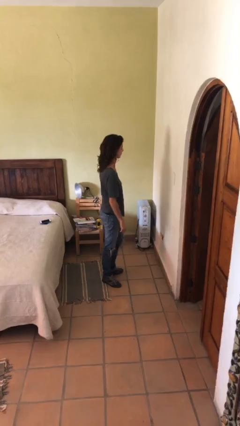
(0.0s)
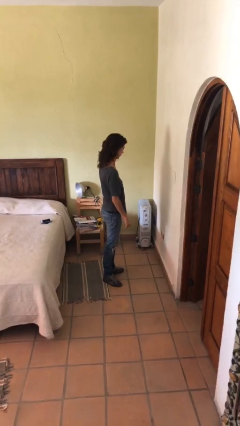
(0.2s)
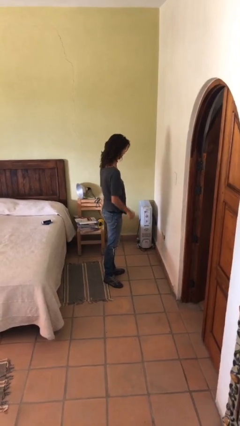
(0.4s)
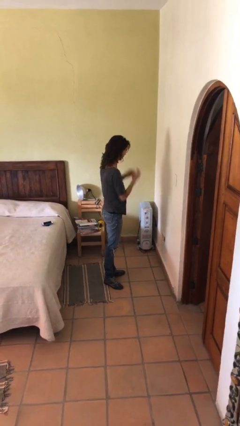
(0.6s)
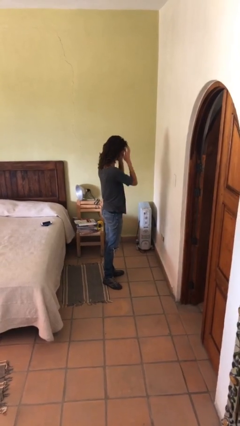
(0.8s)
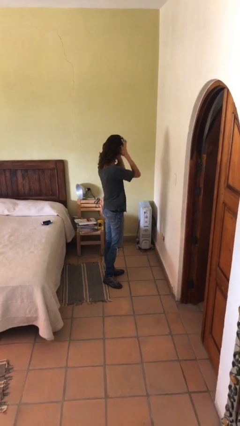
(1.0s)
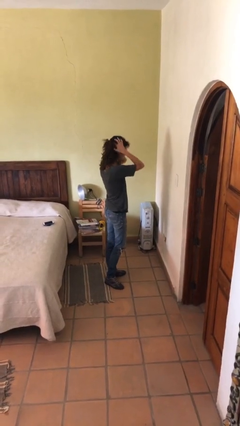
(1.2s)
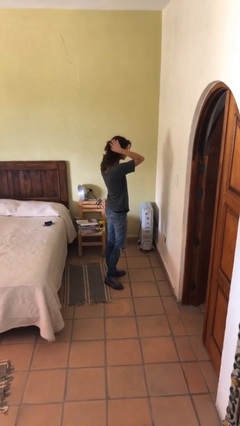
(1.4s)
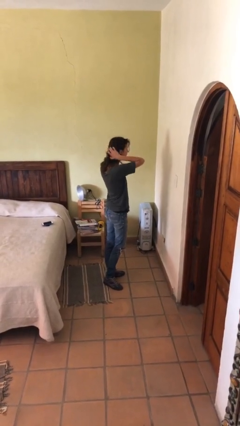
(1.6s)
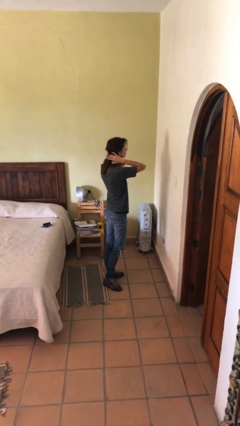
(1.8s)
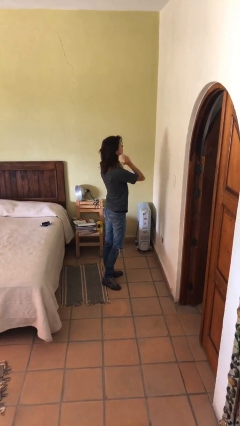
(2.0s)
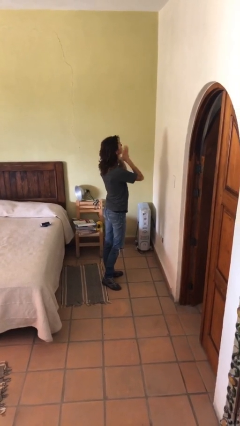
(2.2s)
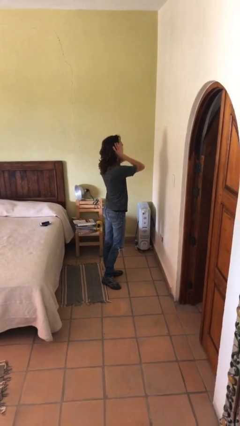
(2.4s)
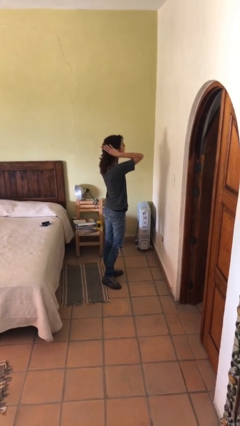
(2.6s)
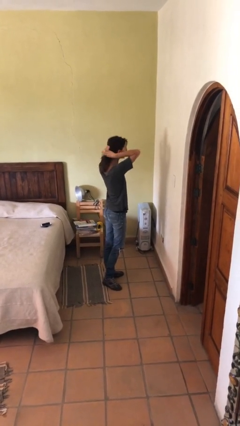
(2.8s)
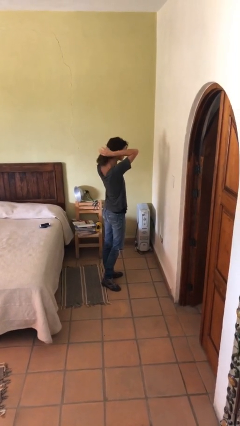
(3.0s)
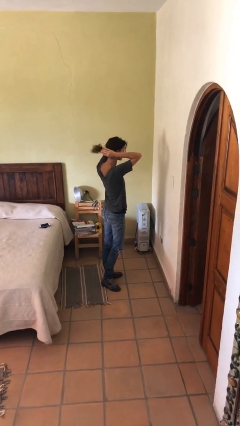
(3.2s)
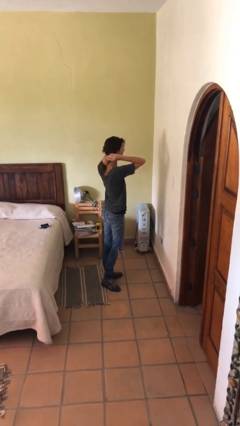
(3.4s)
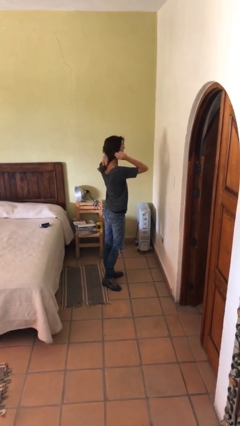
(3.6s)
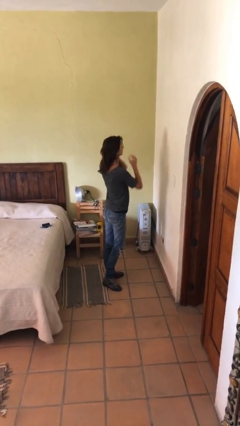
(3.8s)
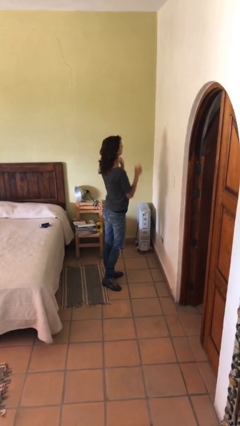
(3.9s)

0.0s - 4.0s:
person strokes hair

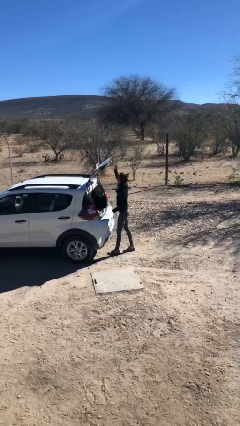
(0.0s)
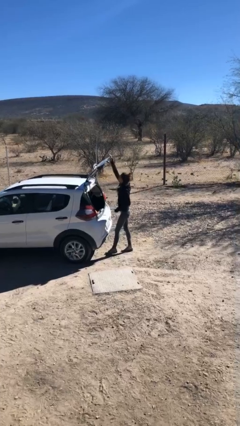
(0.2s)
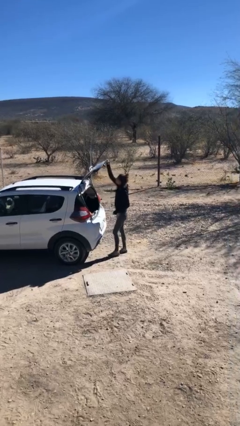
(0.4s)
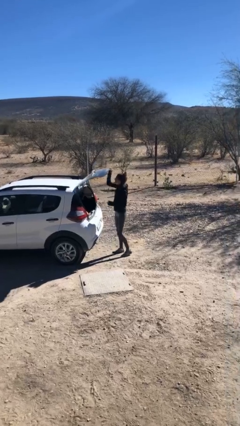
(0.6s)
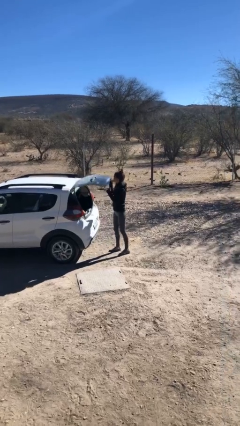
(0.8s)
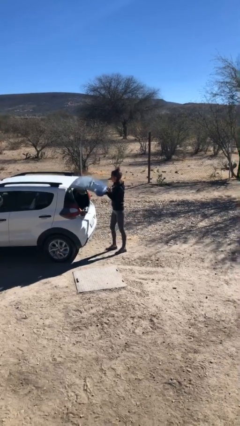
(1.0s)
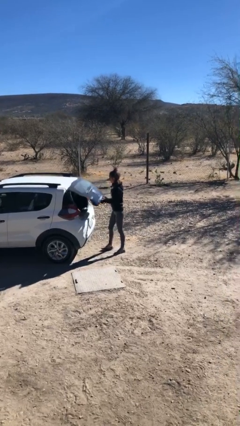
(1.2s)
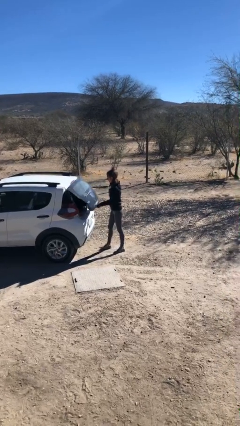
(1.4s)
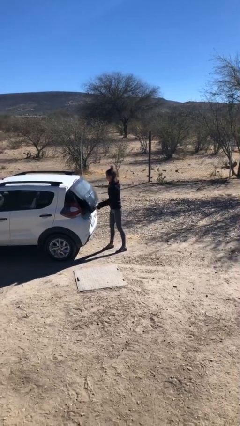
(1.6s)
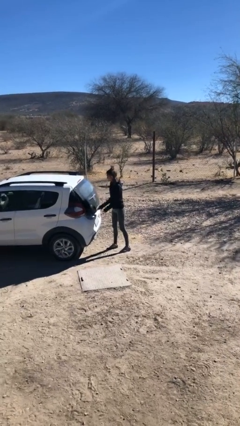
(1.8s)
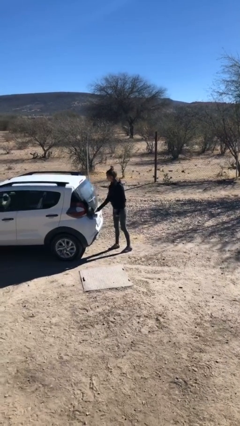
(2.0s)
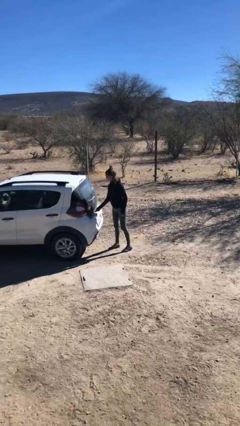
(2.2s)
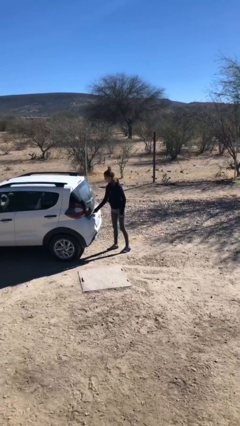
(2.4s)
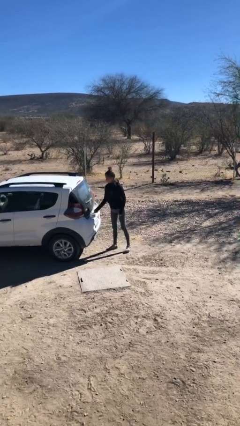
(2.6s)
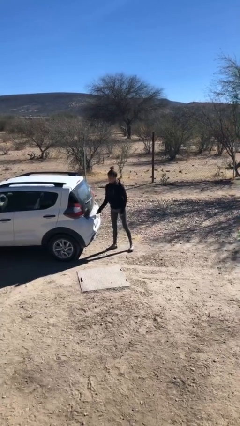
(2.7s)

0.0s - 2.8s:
person closes car trunk

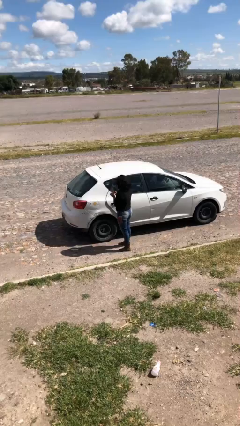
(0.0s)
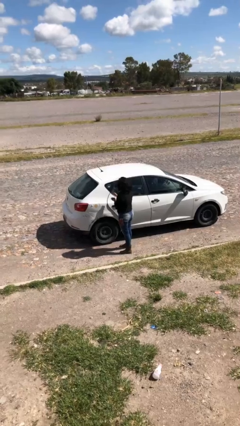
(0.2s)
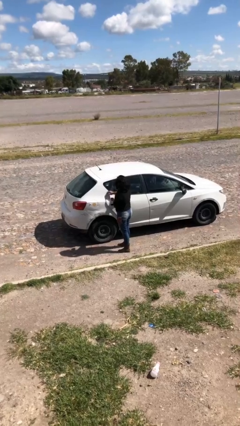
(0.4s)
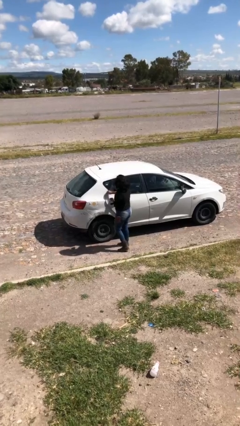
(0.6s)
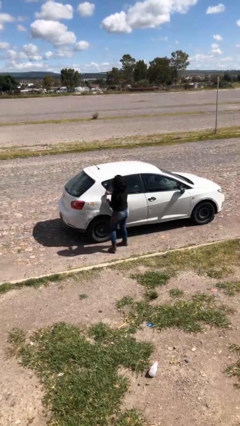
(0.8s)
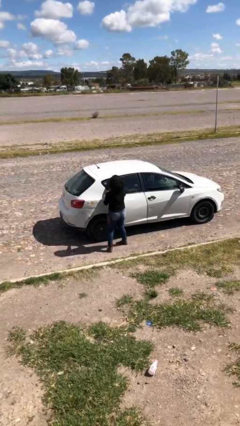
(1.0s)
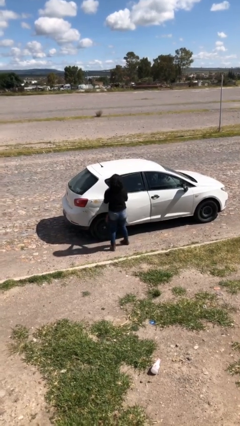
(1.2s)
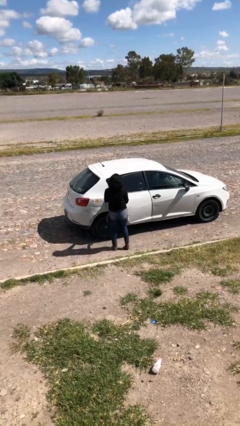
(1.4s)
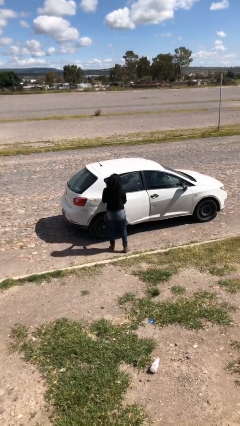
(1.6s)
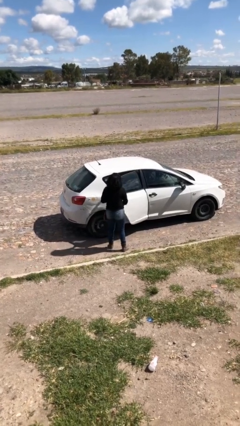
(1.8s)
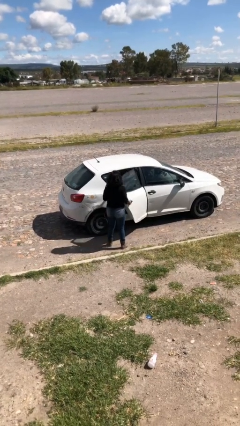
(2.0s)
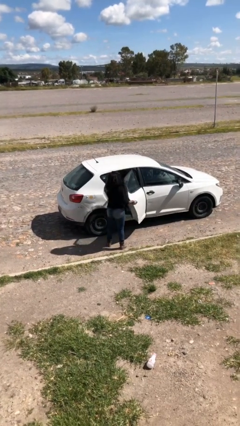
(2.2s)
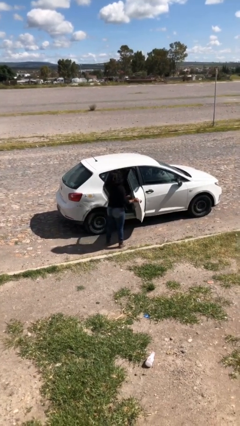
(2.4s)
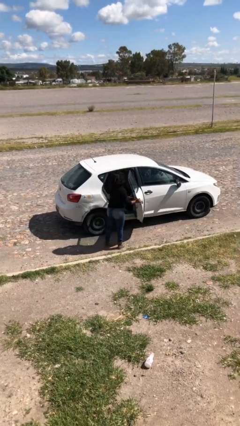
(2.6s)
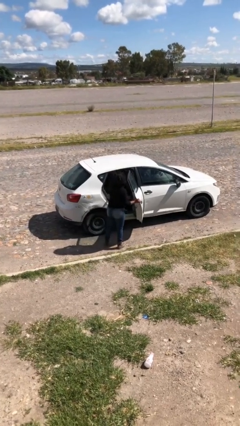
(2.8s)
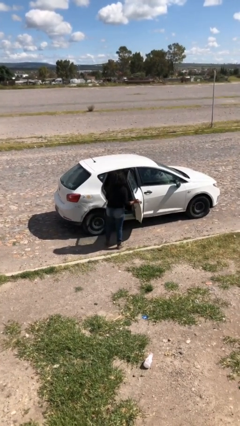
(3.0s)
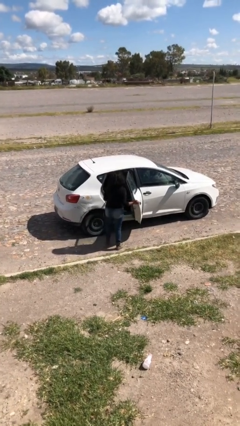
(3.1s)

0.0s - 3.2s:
person opens car door

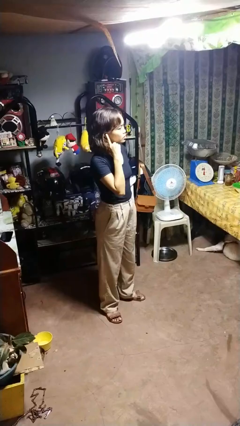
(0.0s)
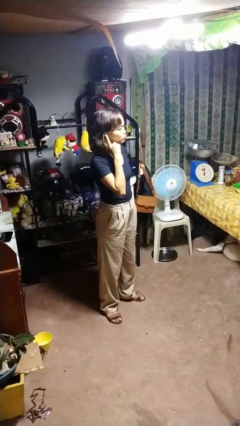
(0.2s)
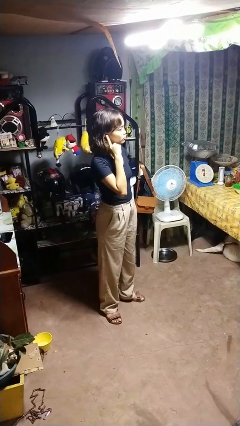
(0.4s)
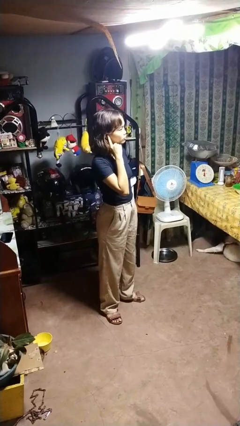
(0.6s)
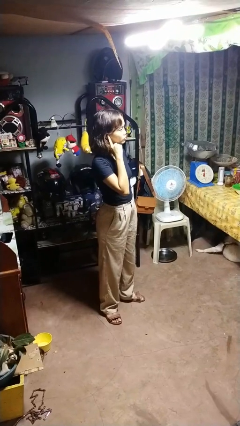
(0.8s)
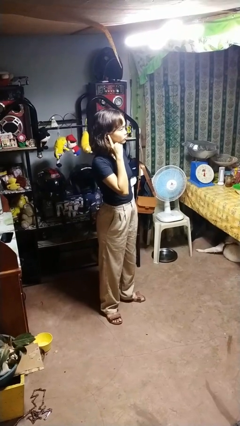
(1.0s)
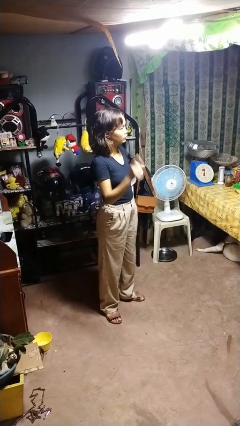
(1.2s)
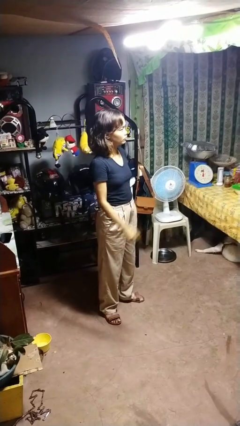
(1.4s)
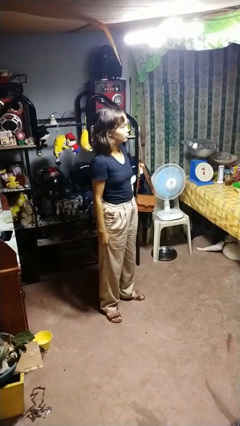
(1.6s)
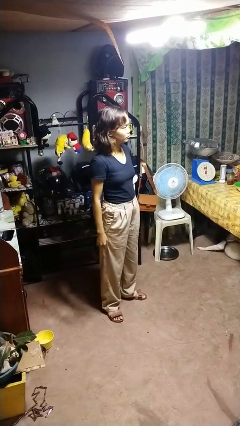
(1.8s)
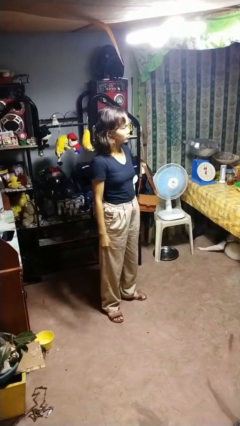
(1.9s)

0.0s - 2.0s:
person gestures listen closely

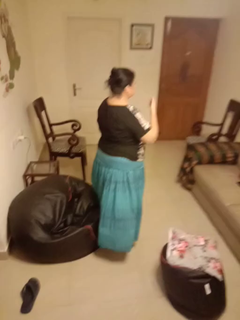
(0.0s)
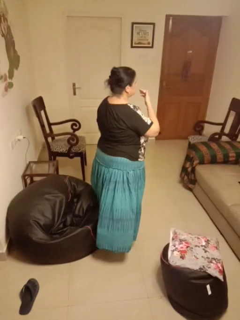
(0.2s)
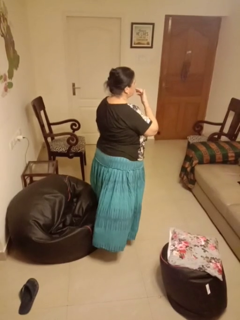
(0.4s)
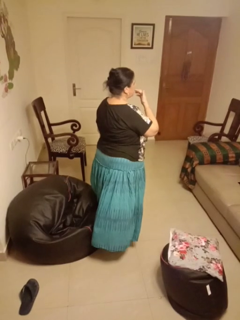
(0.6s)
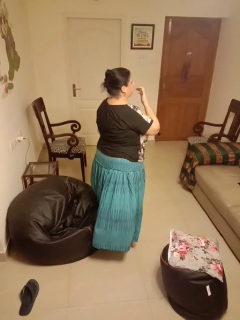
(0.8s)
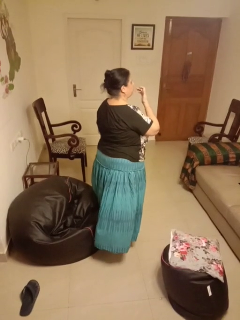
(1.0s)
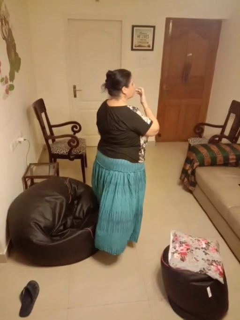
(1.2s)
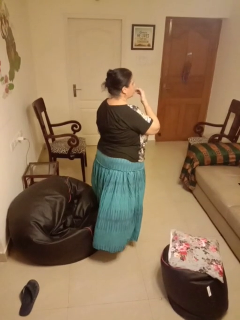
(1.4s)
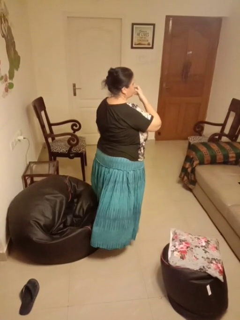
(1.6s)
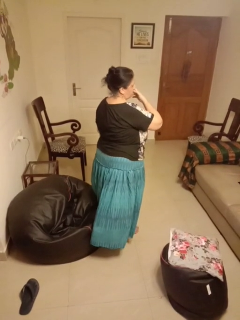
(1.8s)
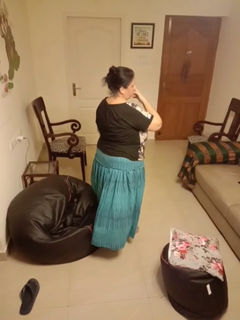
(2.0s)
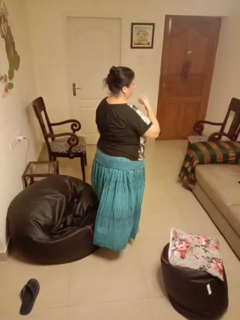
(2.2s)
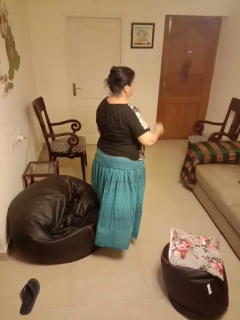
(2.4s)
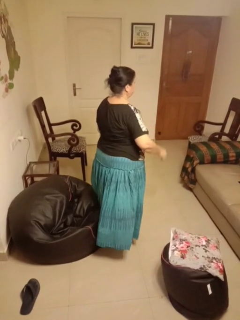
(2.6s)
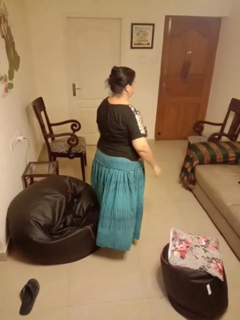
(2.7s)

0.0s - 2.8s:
person licks fingers

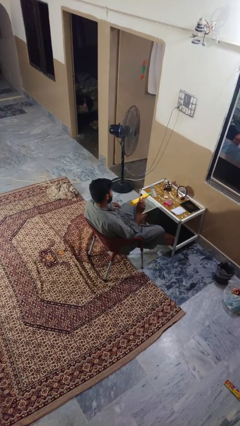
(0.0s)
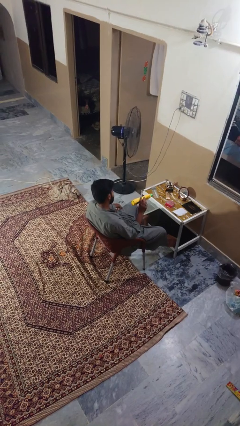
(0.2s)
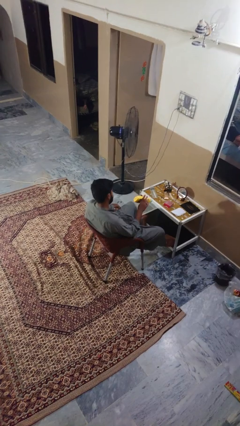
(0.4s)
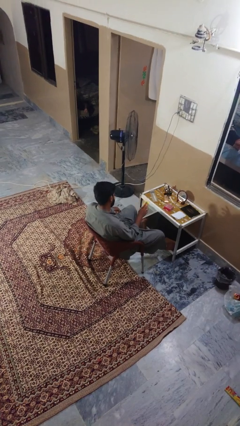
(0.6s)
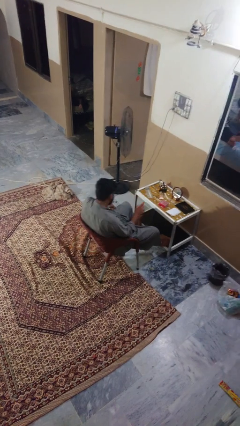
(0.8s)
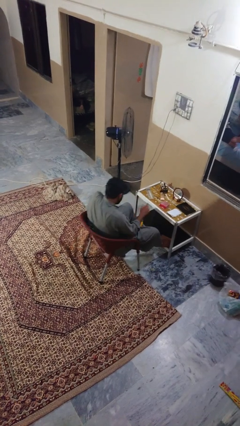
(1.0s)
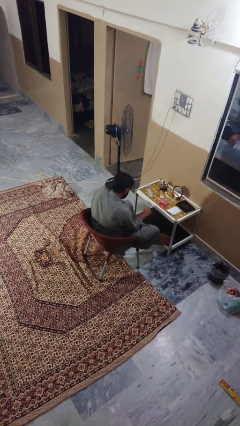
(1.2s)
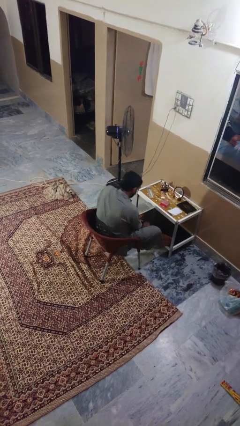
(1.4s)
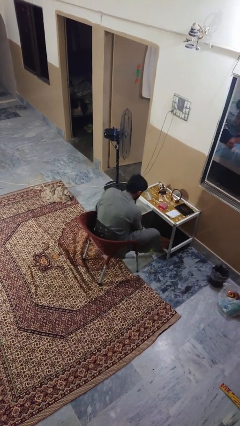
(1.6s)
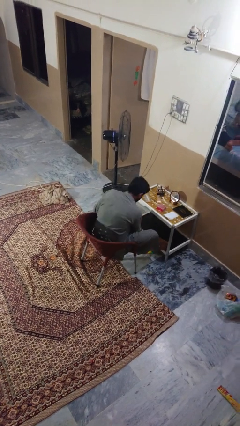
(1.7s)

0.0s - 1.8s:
person throws object to ground

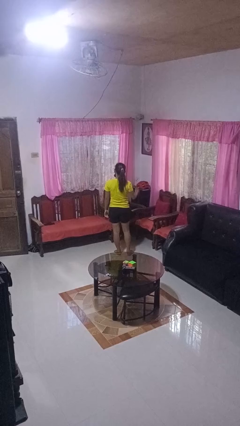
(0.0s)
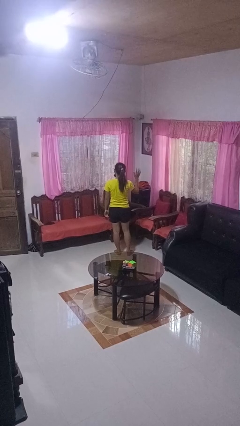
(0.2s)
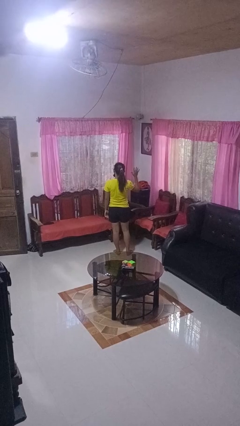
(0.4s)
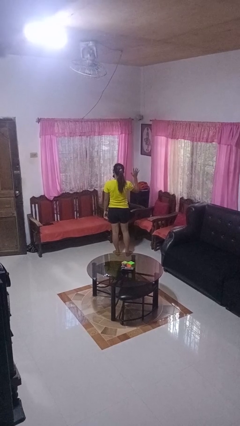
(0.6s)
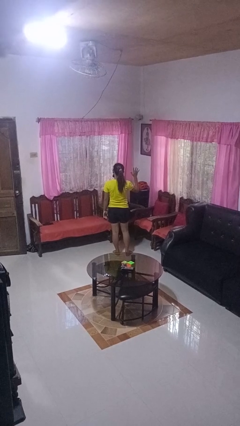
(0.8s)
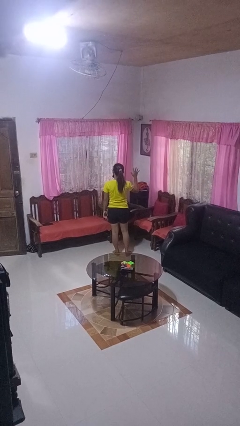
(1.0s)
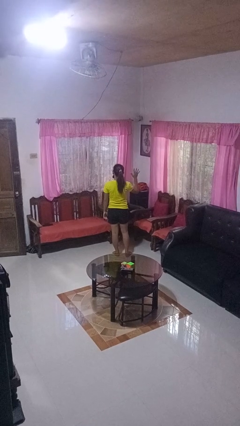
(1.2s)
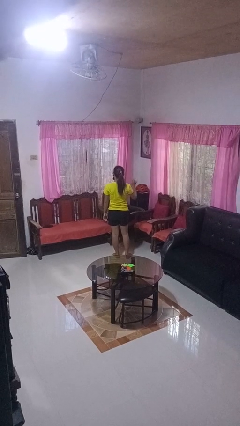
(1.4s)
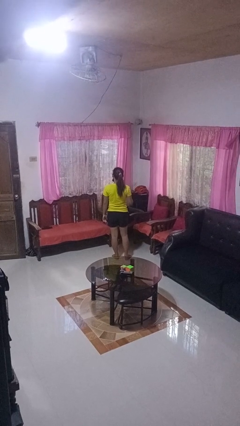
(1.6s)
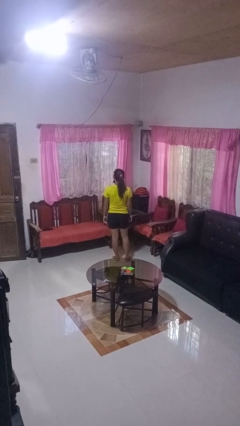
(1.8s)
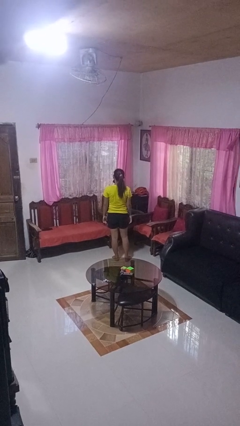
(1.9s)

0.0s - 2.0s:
person gestures number five
